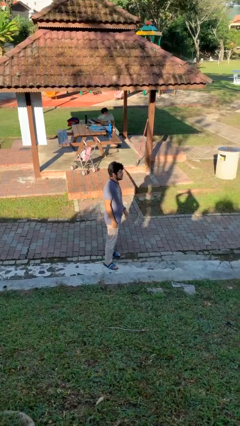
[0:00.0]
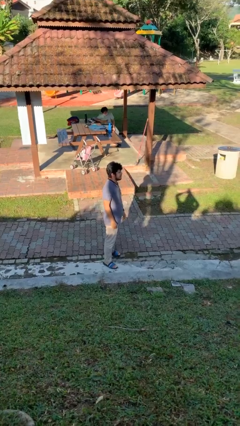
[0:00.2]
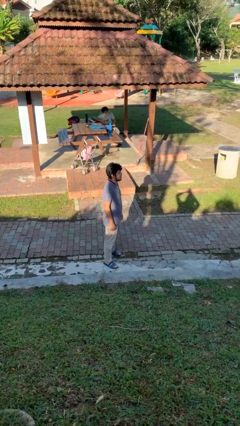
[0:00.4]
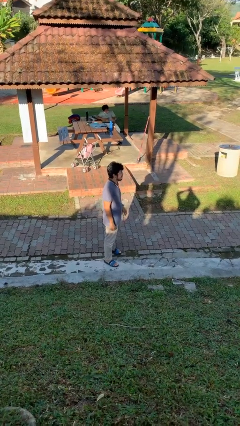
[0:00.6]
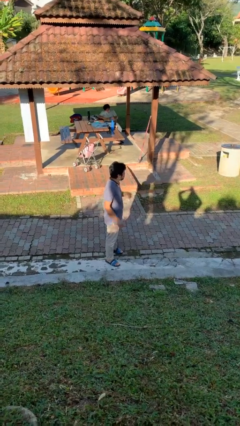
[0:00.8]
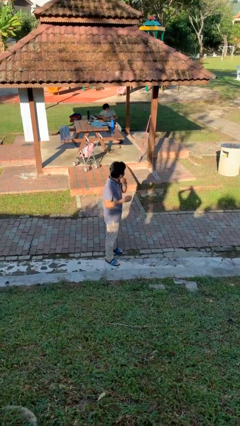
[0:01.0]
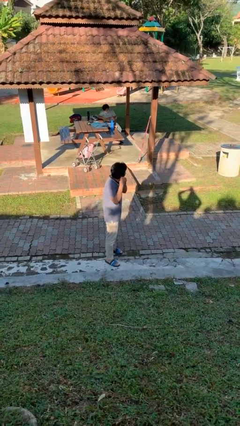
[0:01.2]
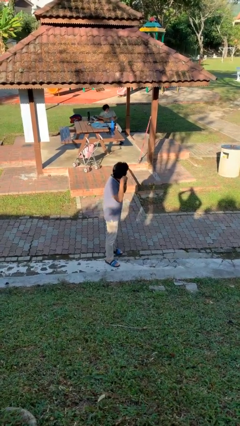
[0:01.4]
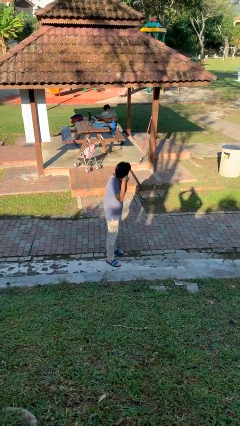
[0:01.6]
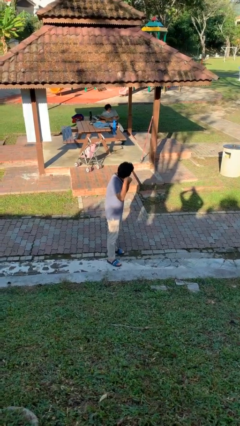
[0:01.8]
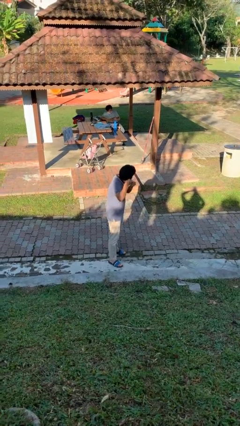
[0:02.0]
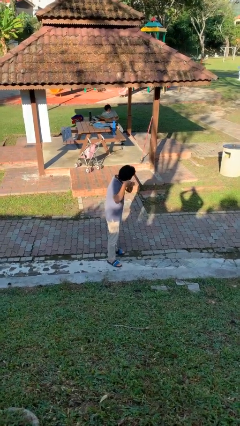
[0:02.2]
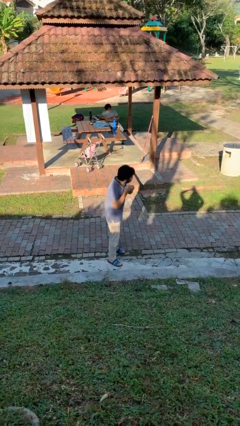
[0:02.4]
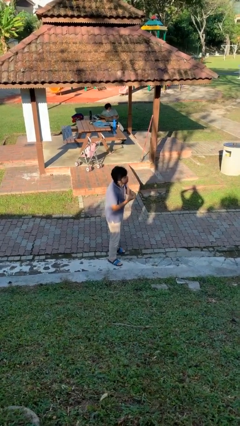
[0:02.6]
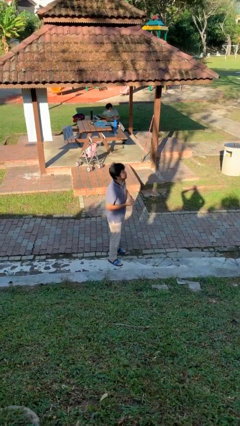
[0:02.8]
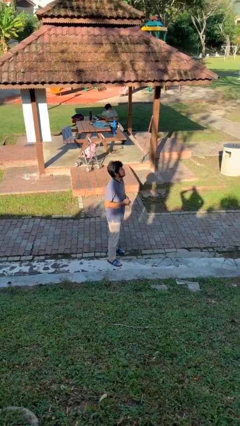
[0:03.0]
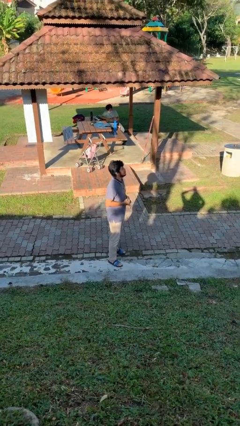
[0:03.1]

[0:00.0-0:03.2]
person takes off earrings

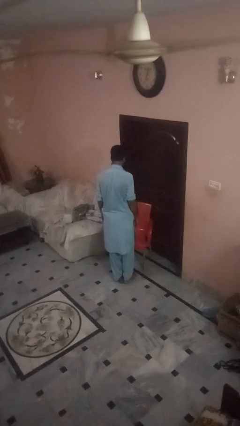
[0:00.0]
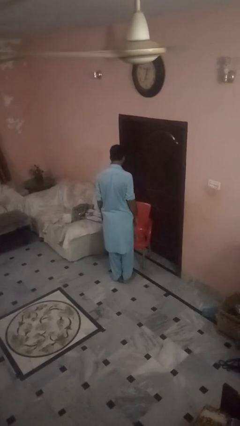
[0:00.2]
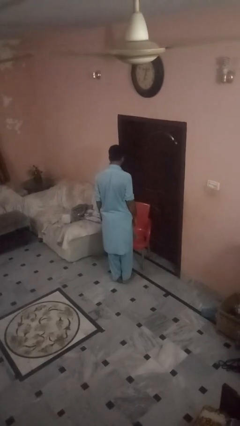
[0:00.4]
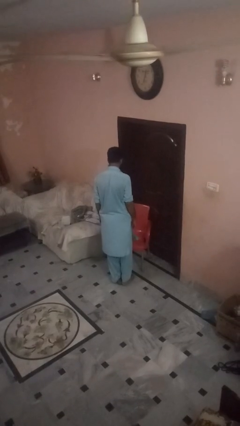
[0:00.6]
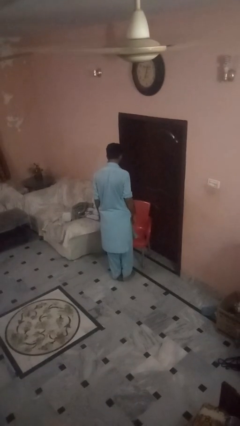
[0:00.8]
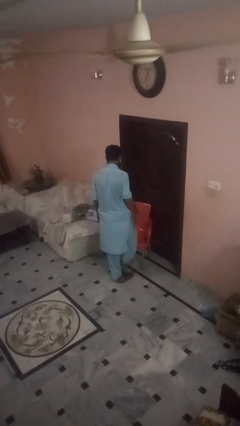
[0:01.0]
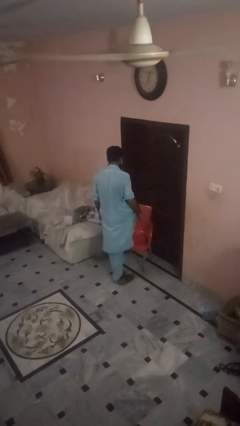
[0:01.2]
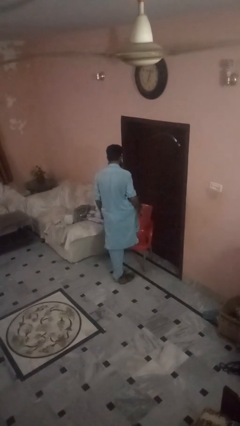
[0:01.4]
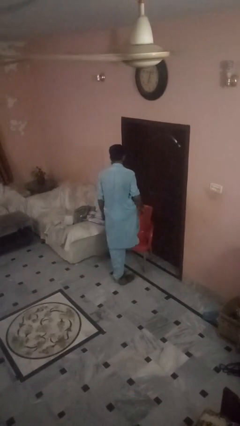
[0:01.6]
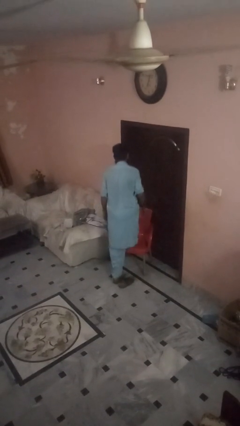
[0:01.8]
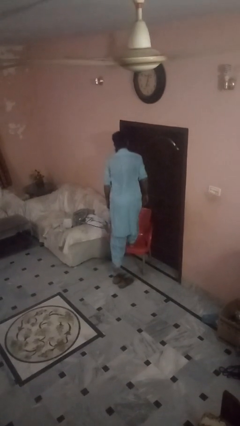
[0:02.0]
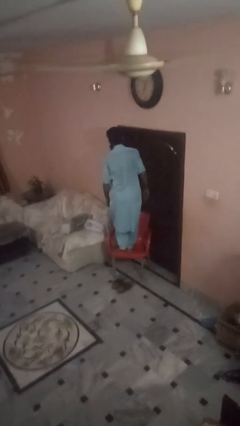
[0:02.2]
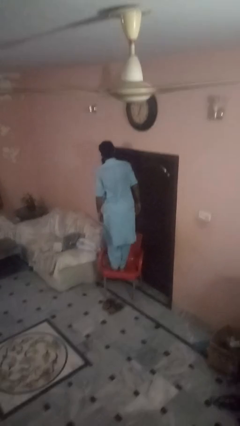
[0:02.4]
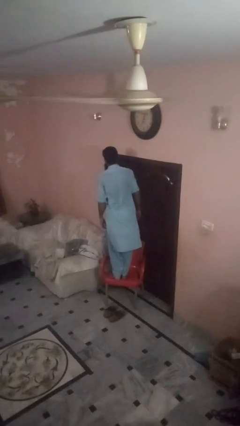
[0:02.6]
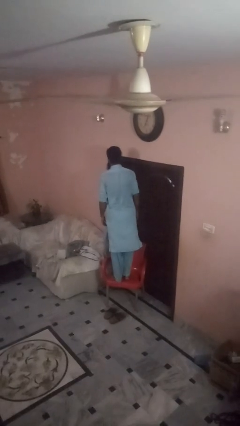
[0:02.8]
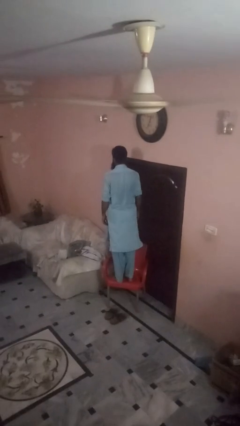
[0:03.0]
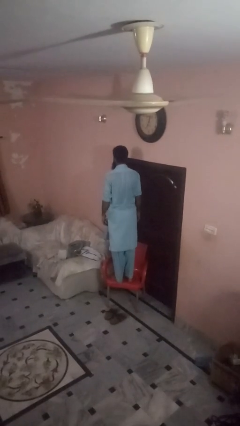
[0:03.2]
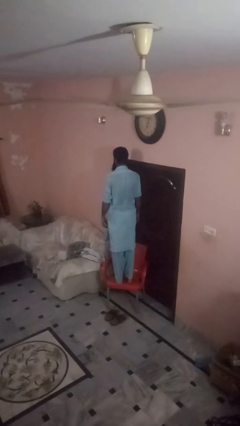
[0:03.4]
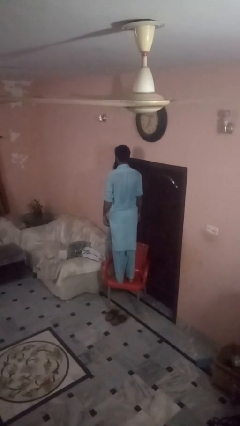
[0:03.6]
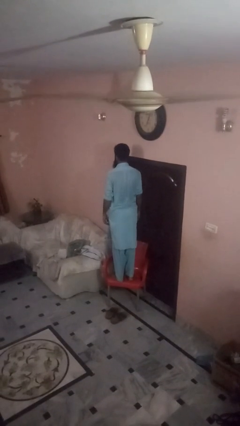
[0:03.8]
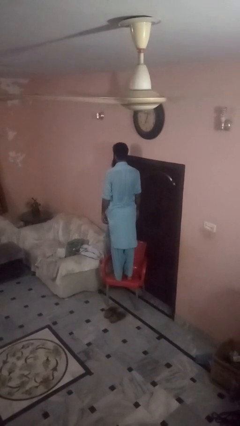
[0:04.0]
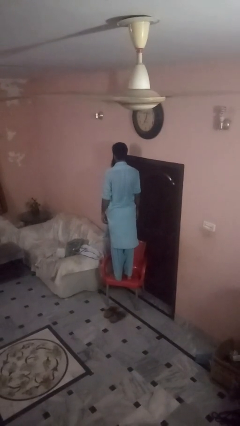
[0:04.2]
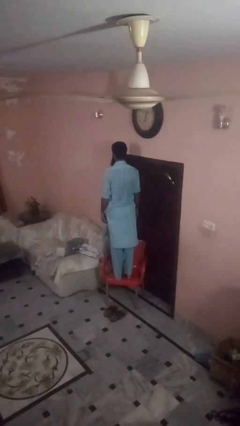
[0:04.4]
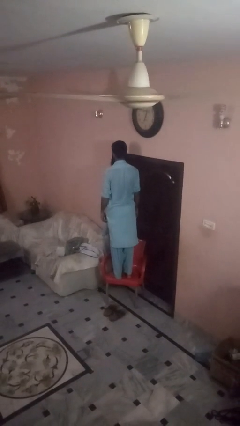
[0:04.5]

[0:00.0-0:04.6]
person climbs on chair

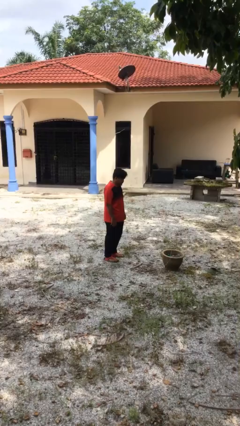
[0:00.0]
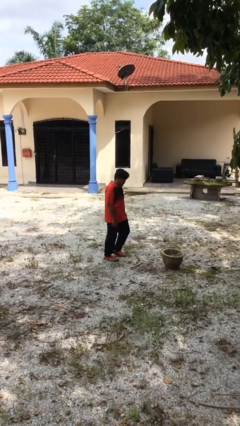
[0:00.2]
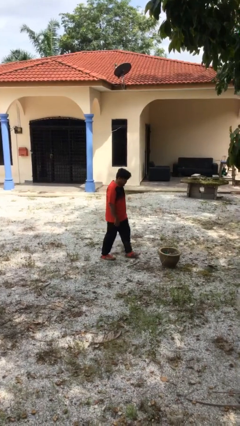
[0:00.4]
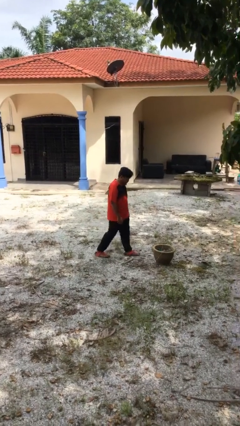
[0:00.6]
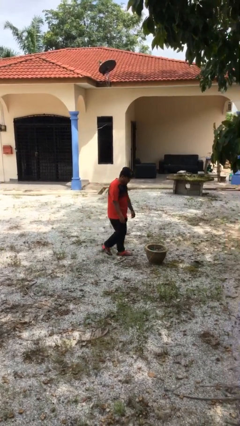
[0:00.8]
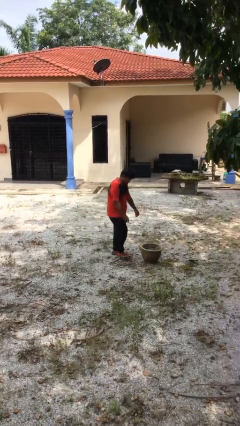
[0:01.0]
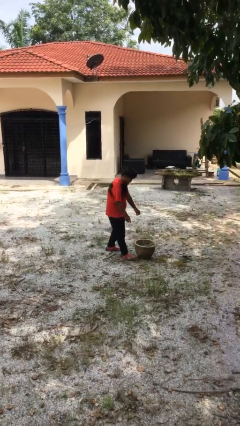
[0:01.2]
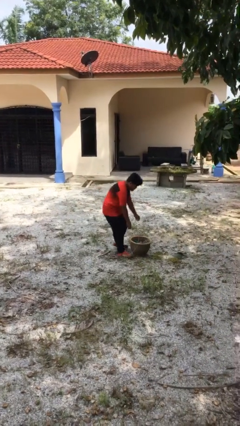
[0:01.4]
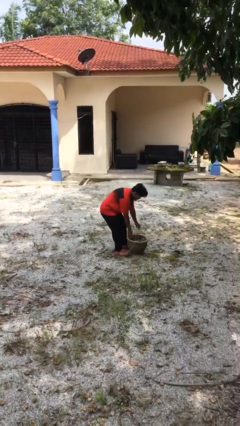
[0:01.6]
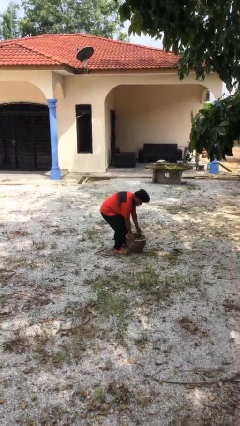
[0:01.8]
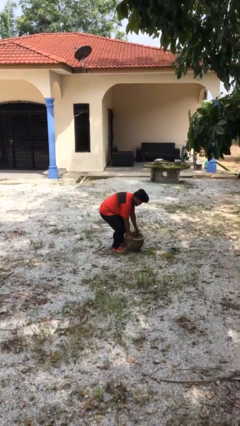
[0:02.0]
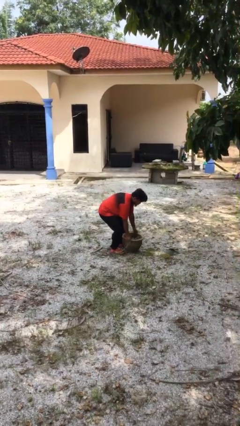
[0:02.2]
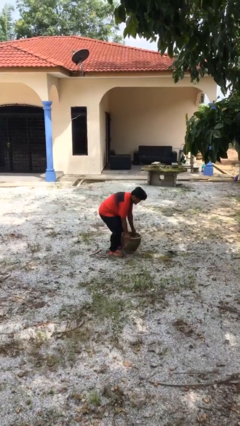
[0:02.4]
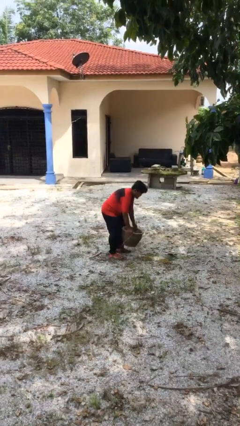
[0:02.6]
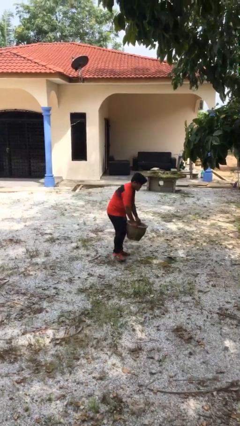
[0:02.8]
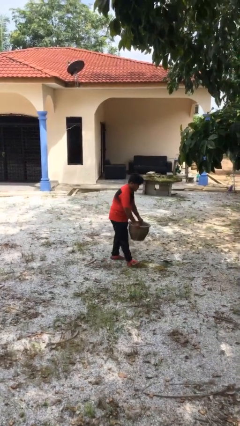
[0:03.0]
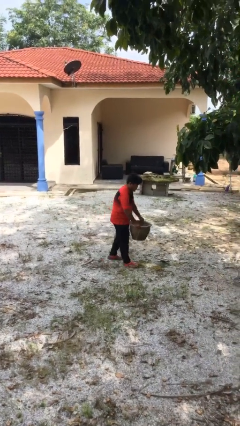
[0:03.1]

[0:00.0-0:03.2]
person picks up object from floor

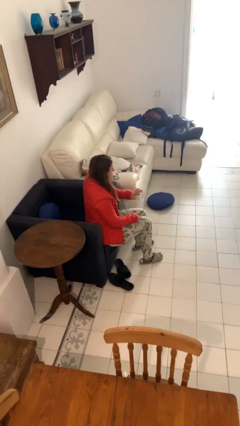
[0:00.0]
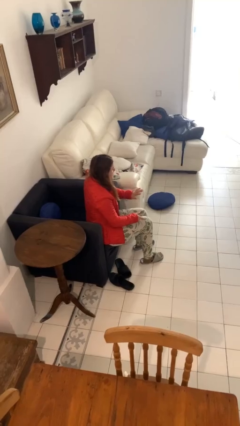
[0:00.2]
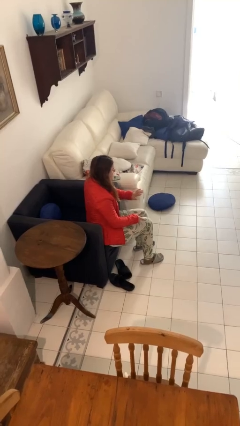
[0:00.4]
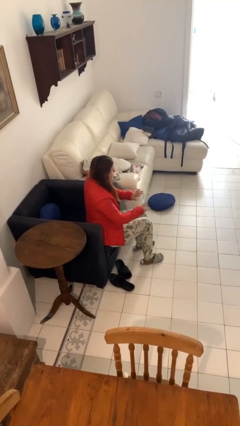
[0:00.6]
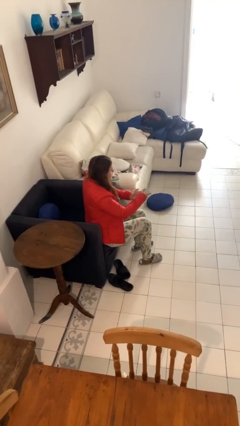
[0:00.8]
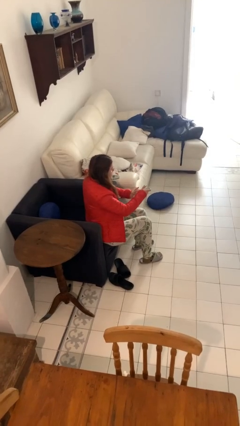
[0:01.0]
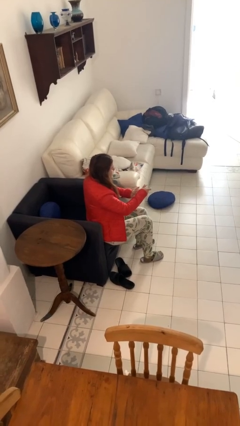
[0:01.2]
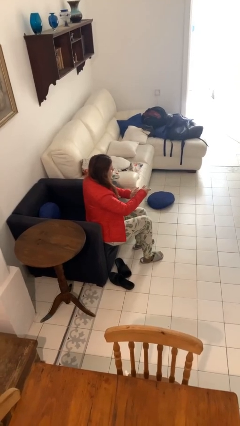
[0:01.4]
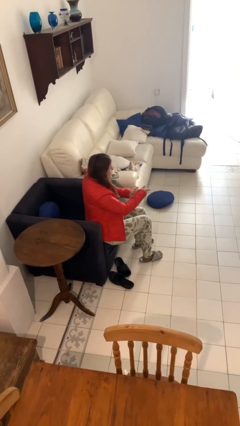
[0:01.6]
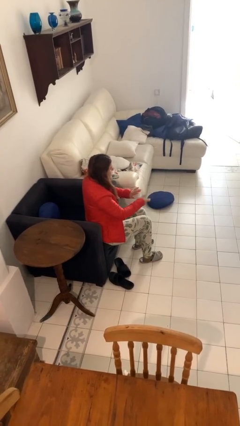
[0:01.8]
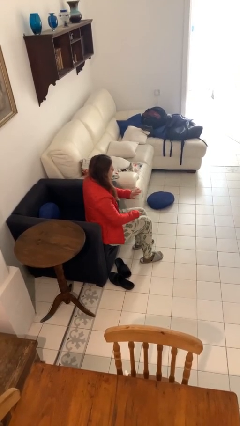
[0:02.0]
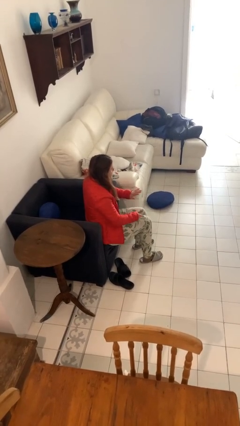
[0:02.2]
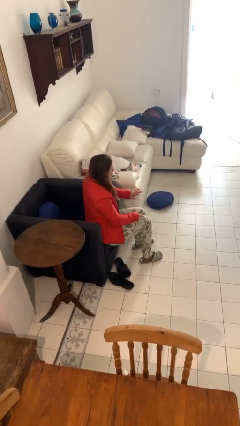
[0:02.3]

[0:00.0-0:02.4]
person clips fingernails

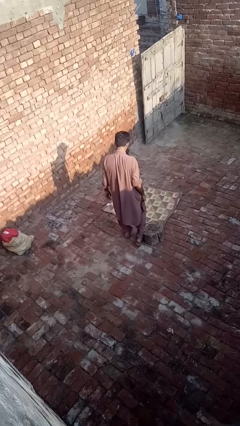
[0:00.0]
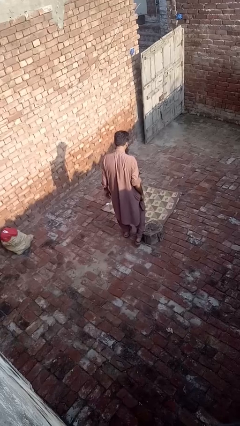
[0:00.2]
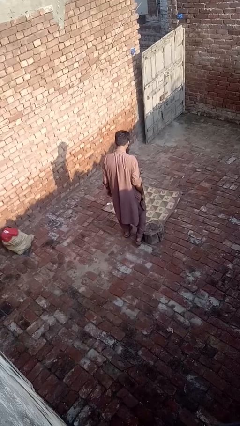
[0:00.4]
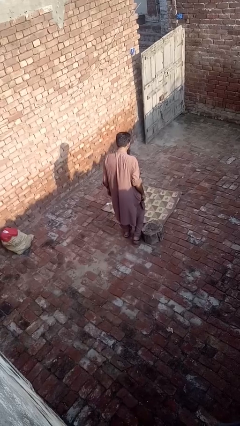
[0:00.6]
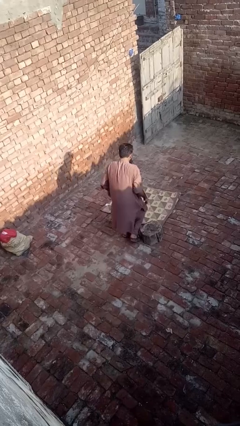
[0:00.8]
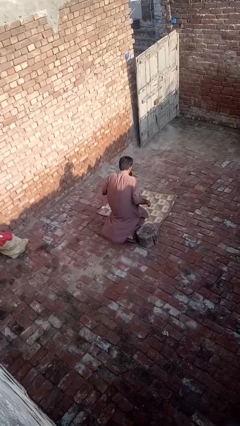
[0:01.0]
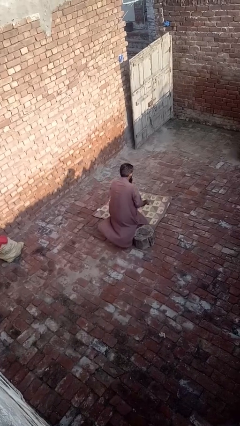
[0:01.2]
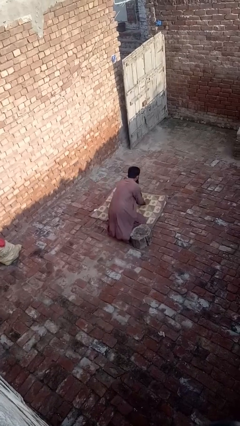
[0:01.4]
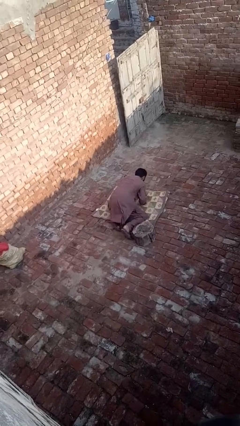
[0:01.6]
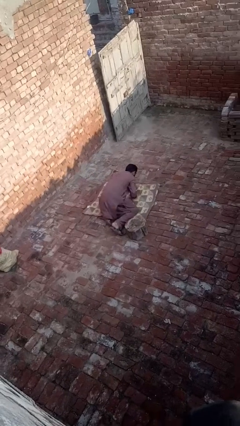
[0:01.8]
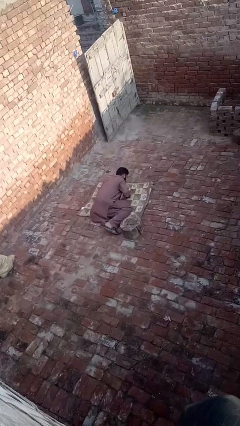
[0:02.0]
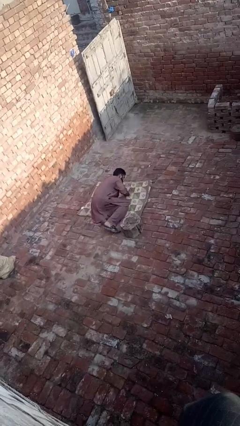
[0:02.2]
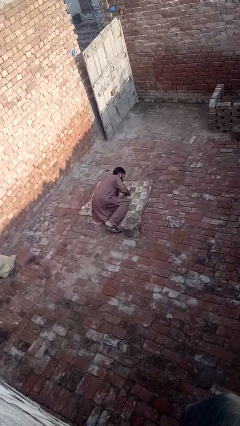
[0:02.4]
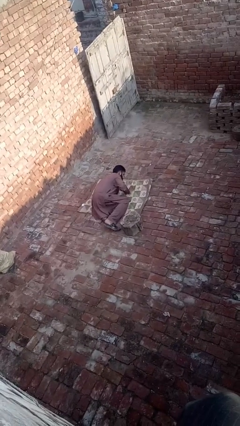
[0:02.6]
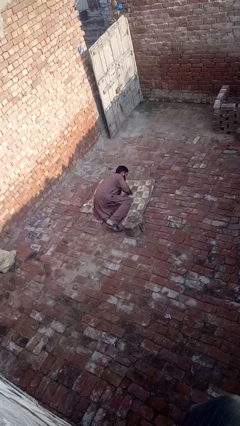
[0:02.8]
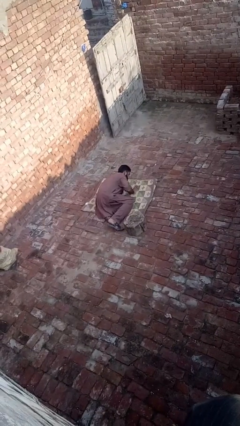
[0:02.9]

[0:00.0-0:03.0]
person lies down on floor

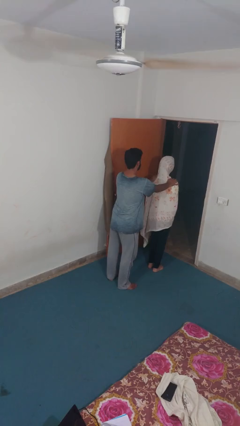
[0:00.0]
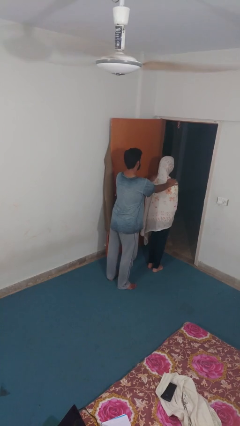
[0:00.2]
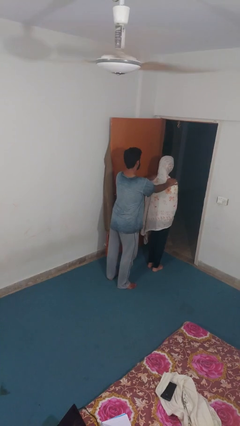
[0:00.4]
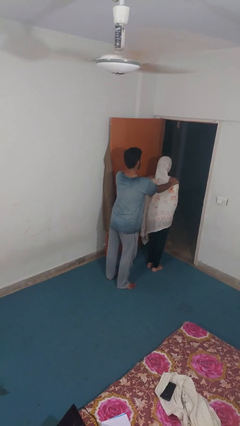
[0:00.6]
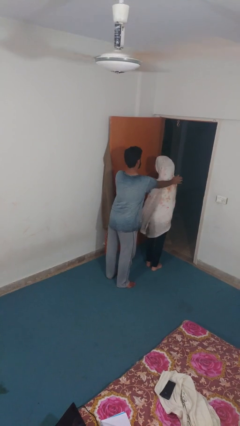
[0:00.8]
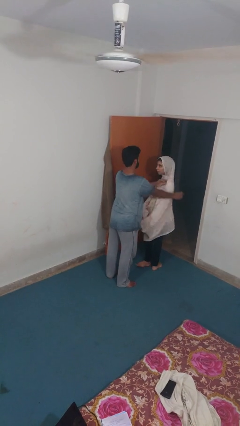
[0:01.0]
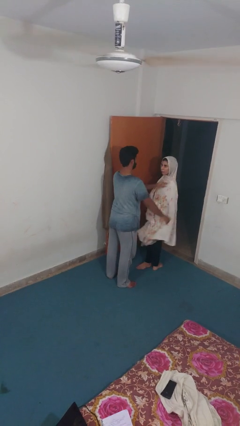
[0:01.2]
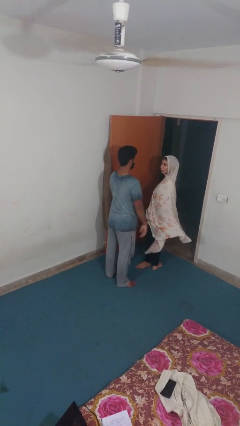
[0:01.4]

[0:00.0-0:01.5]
person spins person around
